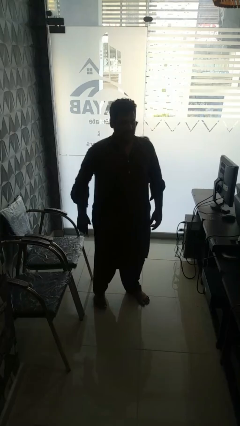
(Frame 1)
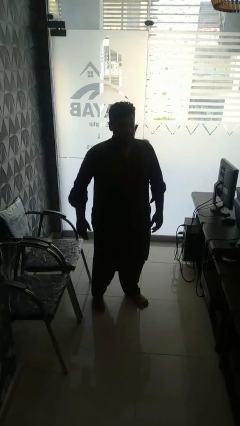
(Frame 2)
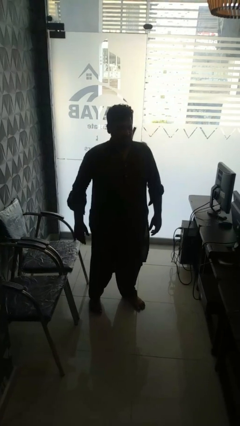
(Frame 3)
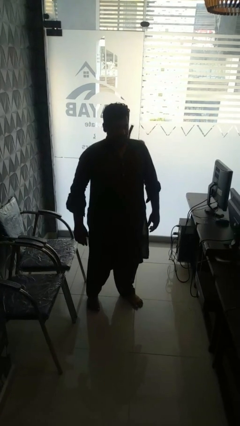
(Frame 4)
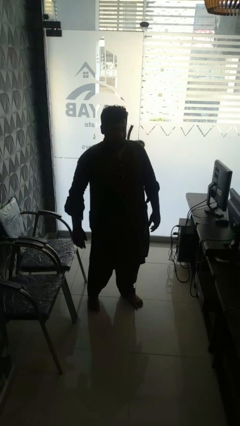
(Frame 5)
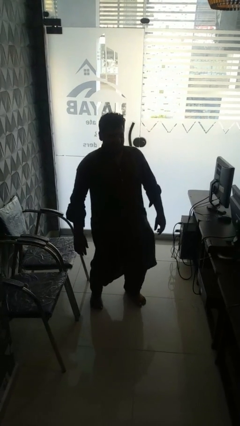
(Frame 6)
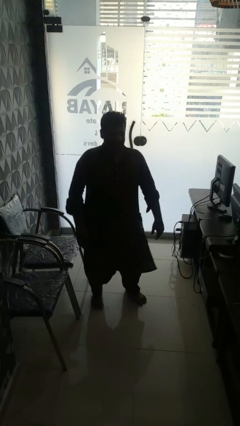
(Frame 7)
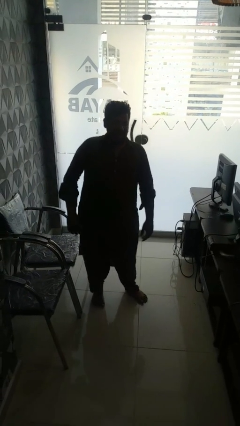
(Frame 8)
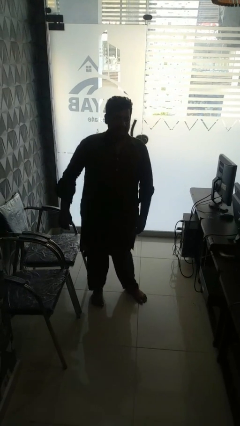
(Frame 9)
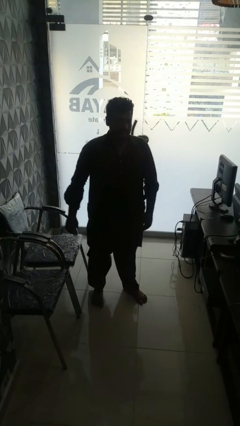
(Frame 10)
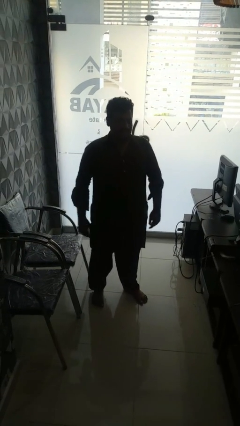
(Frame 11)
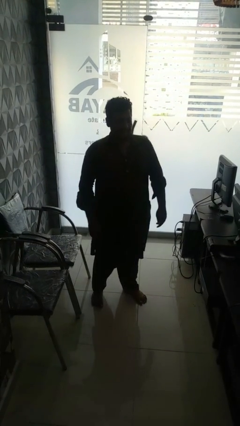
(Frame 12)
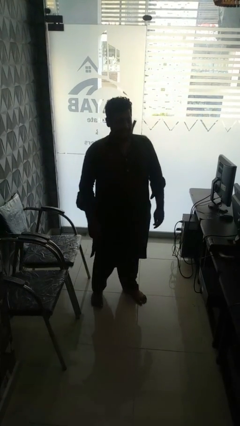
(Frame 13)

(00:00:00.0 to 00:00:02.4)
person wiggles hips

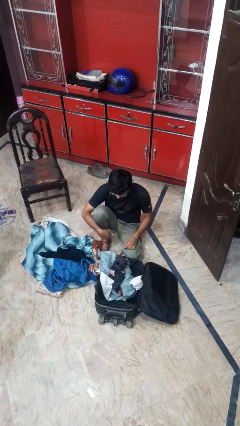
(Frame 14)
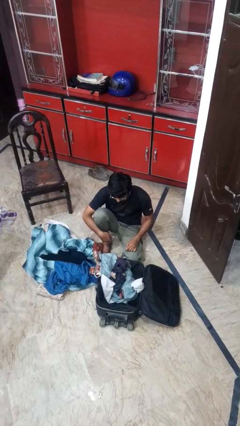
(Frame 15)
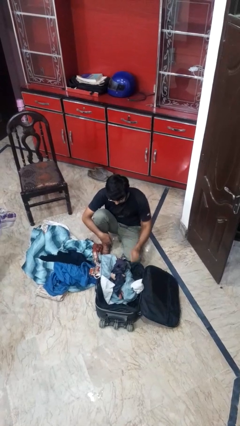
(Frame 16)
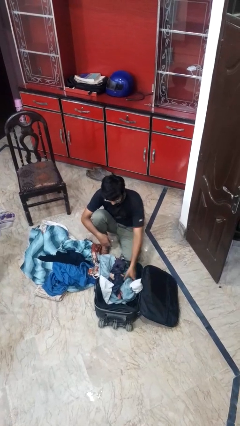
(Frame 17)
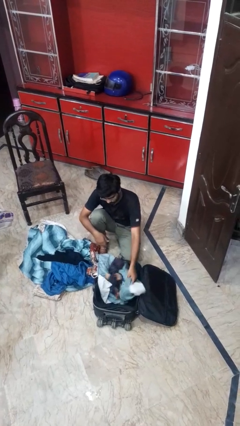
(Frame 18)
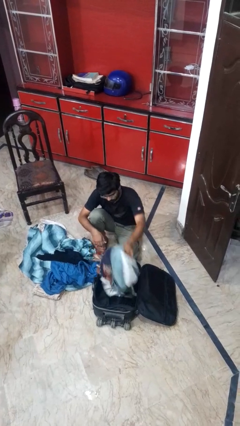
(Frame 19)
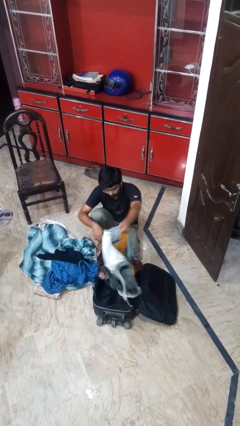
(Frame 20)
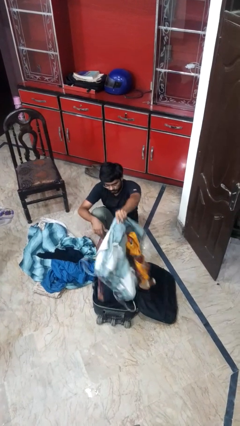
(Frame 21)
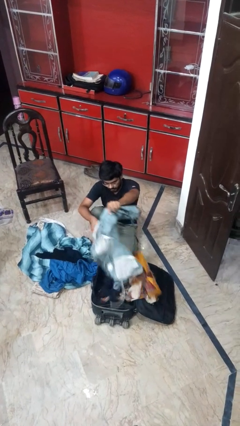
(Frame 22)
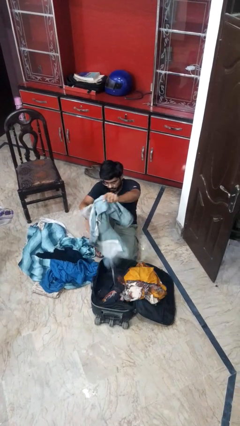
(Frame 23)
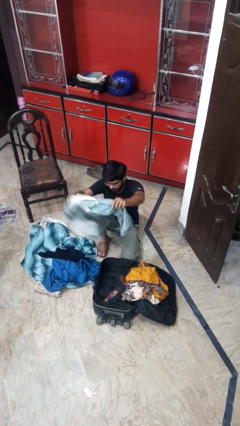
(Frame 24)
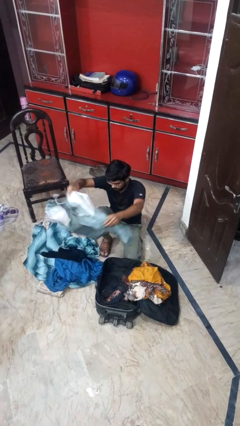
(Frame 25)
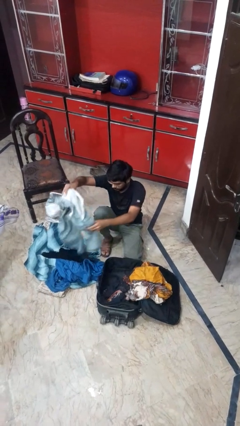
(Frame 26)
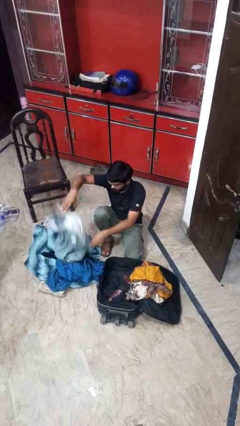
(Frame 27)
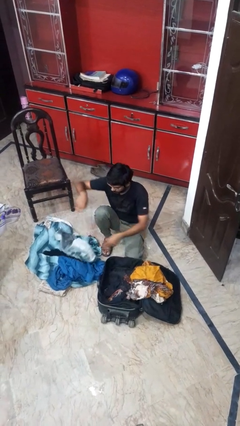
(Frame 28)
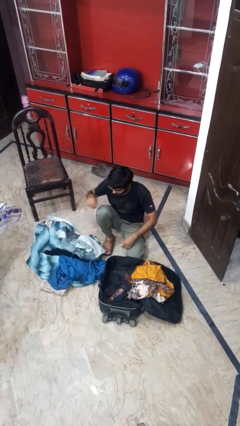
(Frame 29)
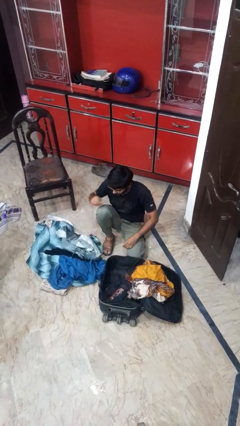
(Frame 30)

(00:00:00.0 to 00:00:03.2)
person unloads clothes from suitcase

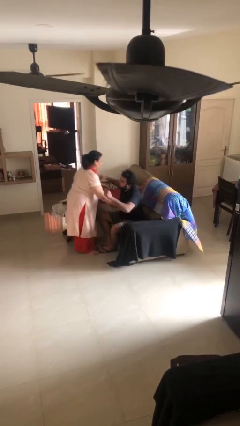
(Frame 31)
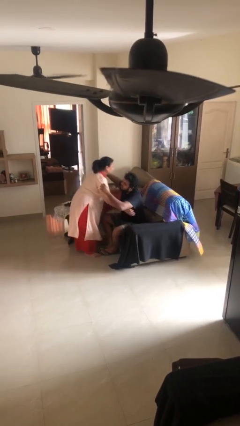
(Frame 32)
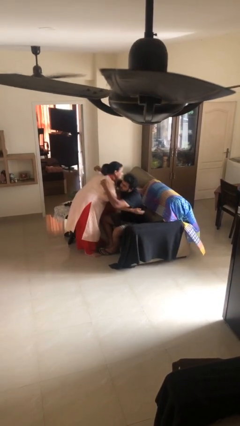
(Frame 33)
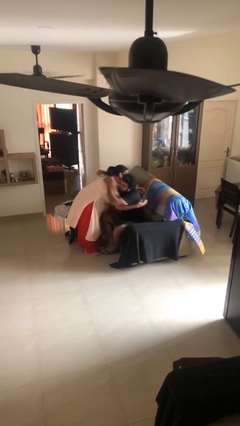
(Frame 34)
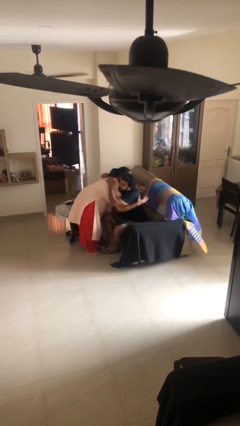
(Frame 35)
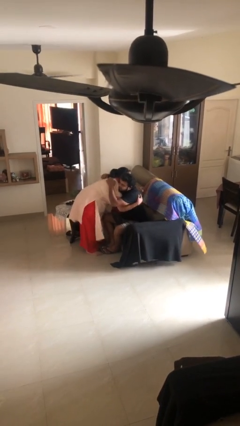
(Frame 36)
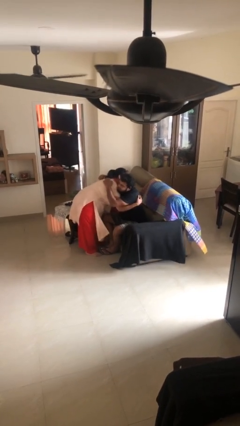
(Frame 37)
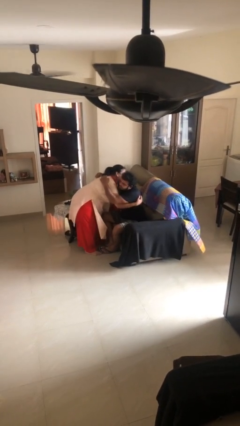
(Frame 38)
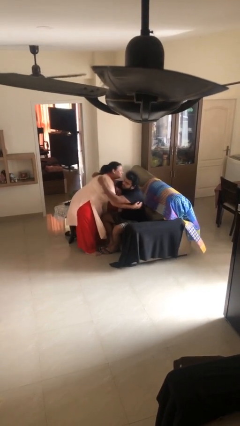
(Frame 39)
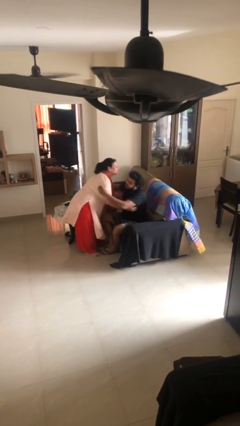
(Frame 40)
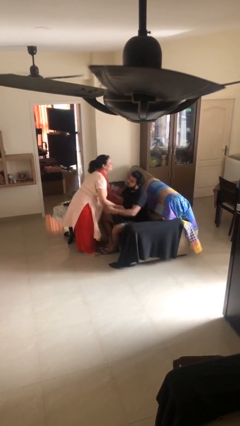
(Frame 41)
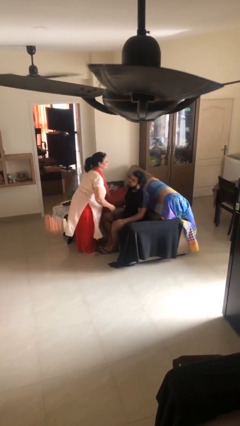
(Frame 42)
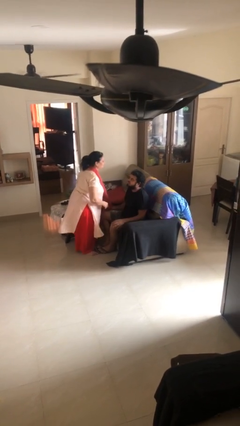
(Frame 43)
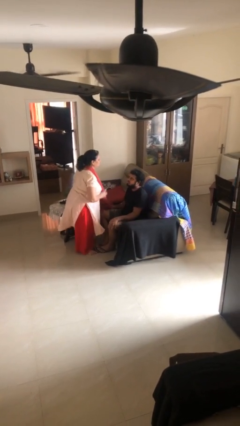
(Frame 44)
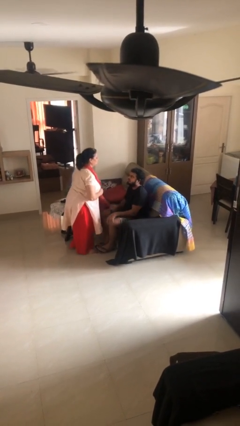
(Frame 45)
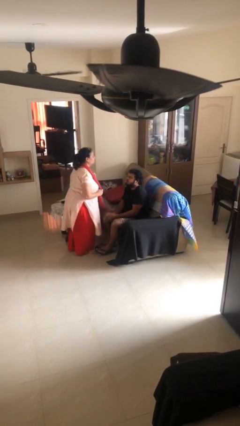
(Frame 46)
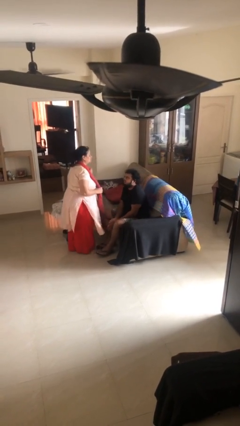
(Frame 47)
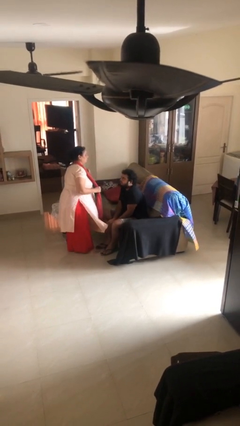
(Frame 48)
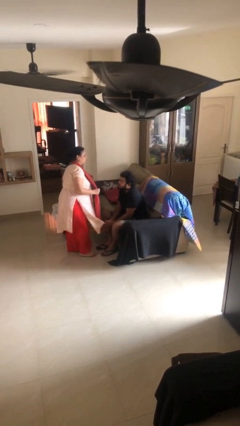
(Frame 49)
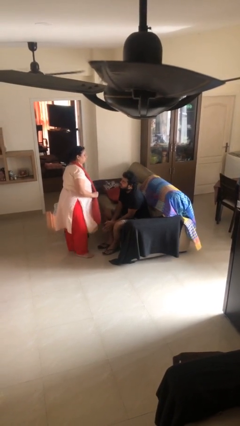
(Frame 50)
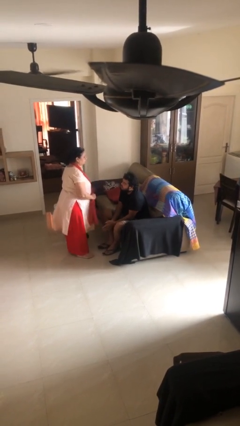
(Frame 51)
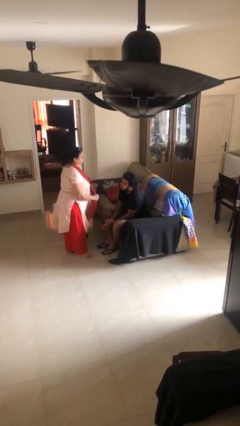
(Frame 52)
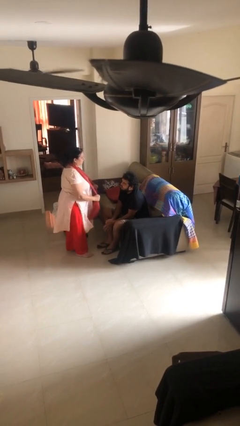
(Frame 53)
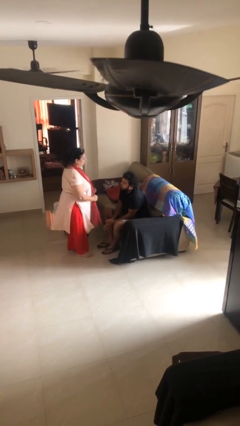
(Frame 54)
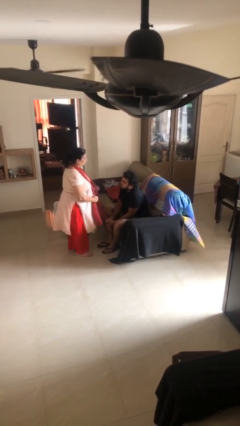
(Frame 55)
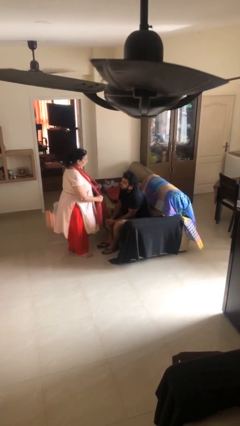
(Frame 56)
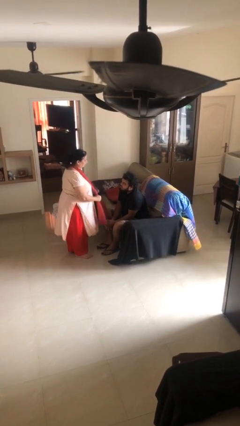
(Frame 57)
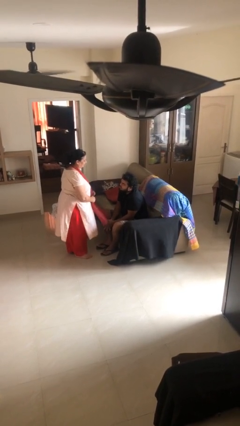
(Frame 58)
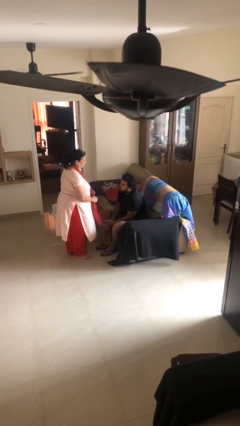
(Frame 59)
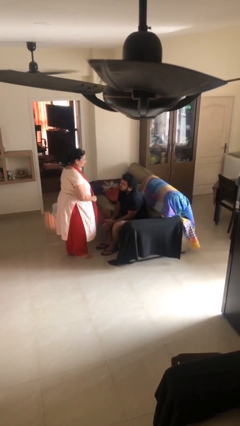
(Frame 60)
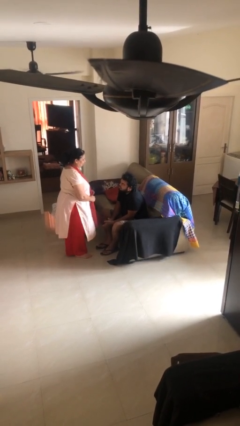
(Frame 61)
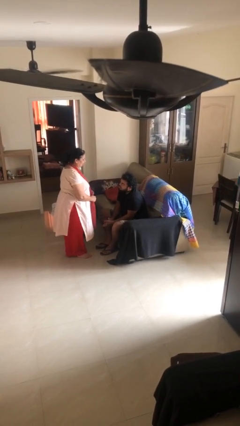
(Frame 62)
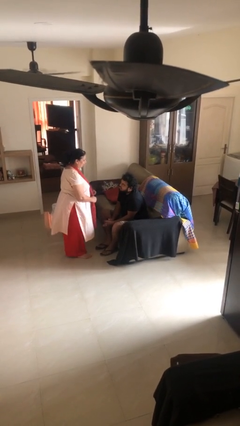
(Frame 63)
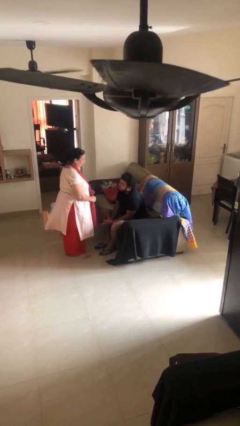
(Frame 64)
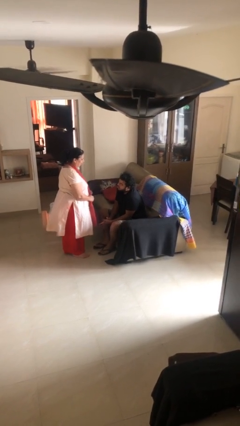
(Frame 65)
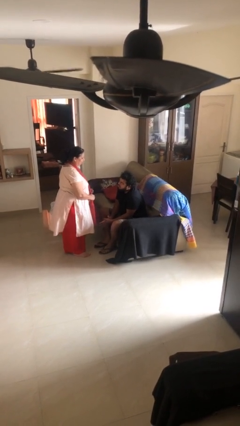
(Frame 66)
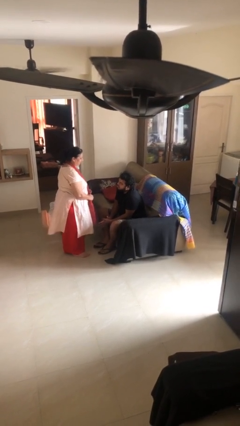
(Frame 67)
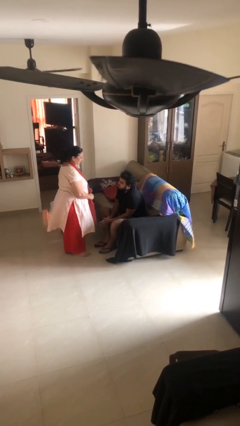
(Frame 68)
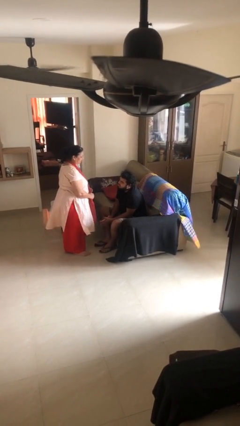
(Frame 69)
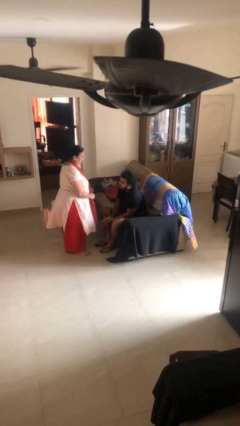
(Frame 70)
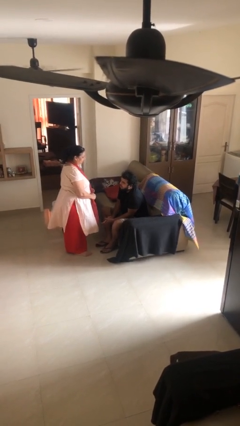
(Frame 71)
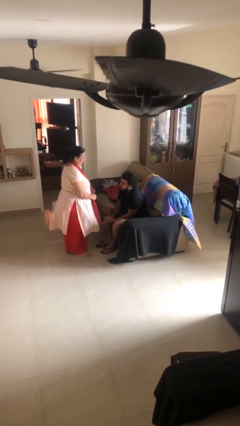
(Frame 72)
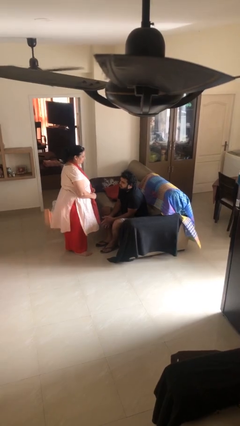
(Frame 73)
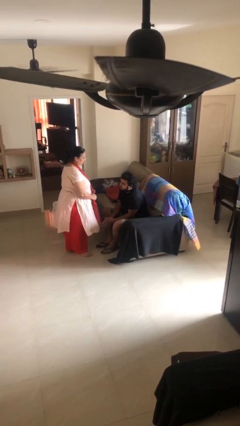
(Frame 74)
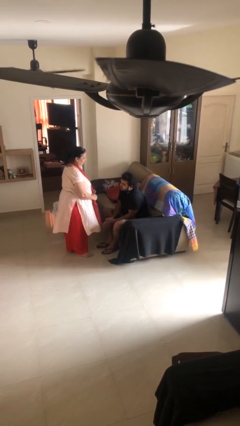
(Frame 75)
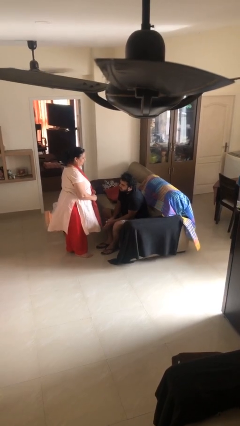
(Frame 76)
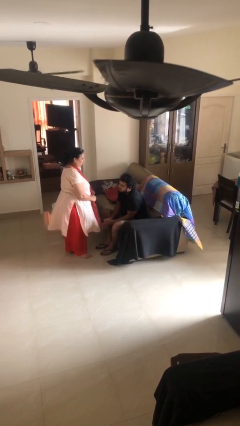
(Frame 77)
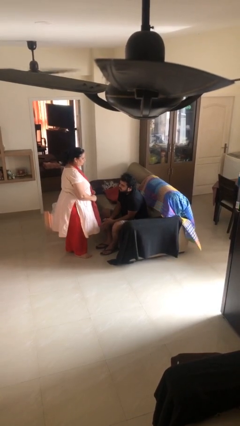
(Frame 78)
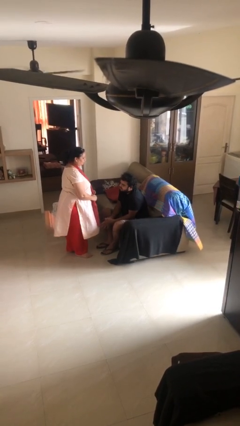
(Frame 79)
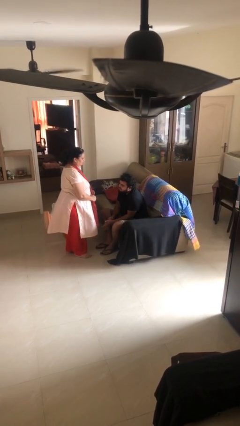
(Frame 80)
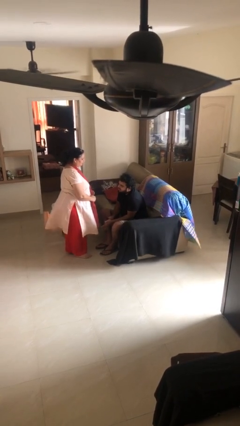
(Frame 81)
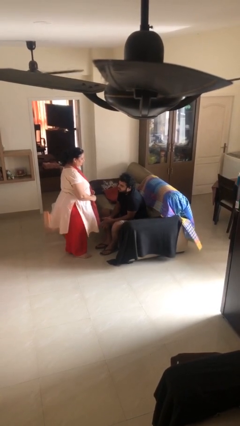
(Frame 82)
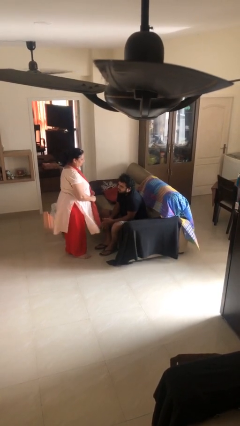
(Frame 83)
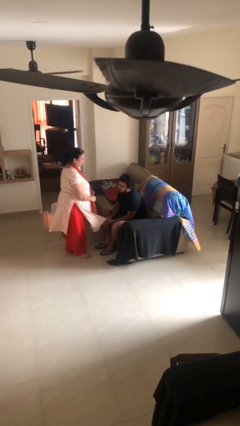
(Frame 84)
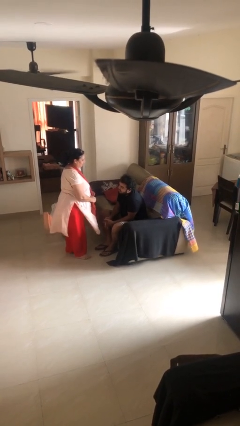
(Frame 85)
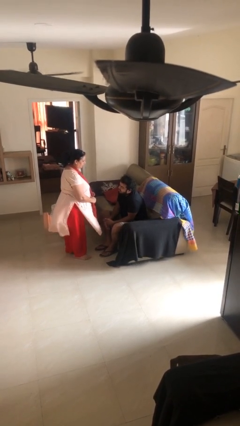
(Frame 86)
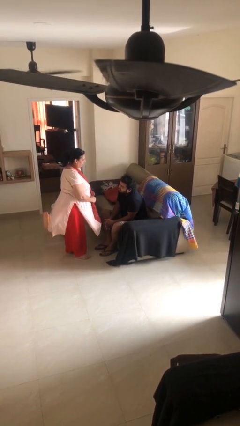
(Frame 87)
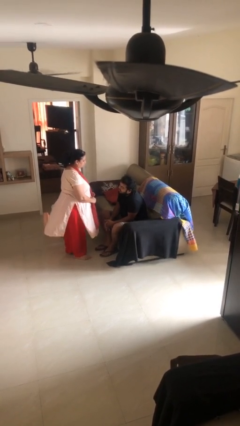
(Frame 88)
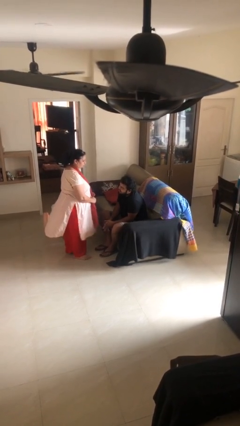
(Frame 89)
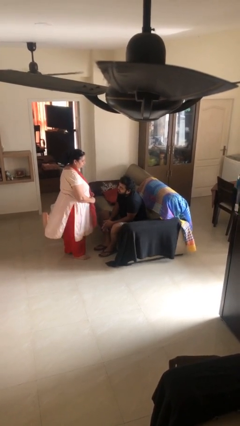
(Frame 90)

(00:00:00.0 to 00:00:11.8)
person embraces person

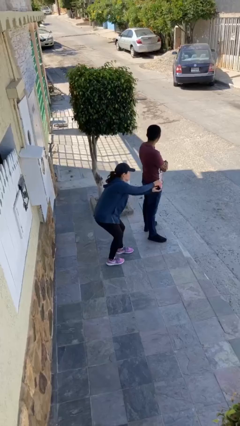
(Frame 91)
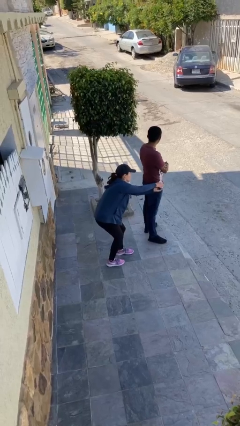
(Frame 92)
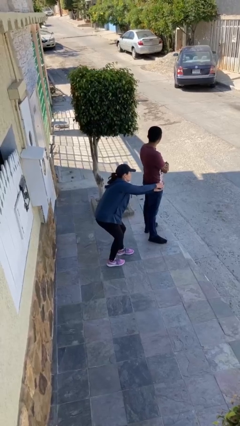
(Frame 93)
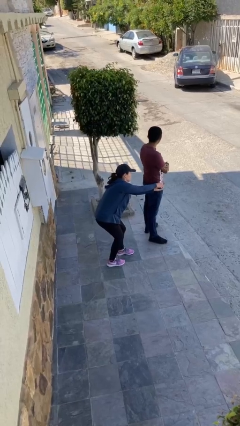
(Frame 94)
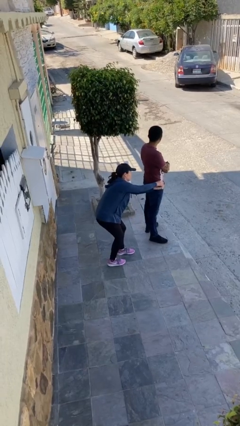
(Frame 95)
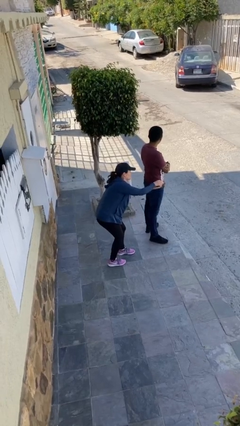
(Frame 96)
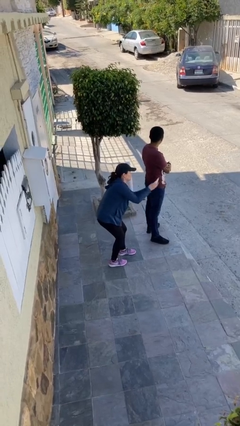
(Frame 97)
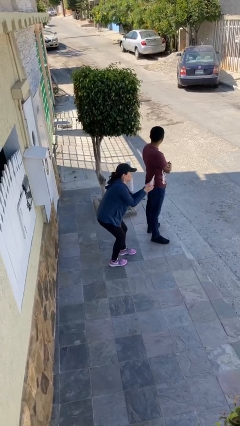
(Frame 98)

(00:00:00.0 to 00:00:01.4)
person steals object from person
